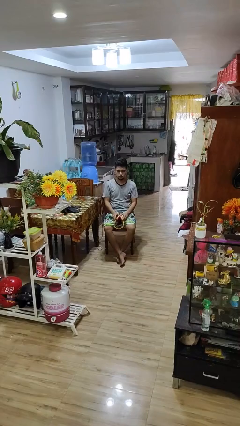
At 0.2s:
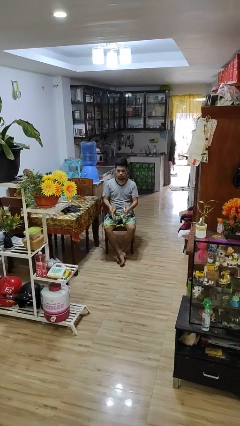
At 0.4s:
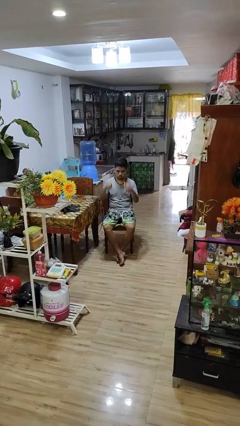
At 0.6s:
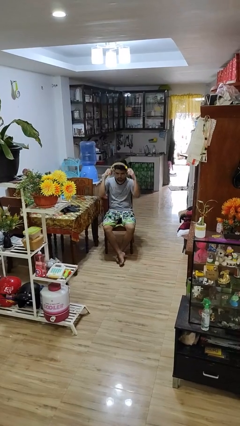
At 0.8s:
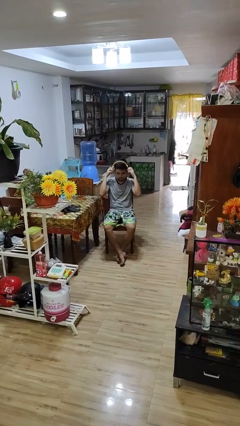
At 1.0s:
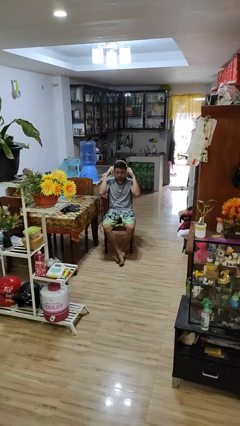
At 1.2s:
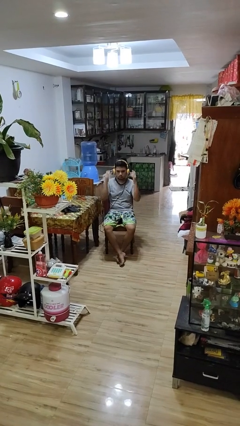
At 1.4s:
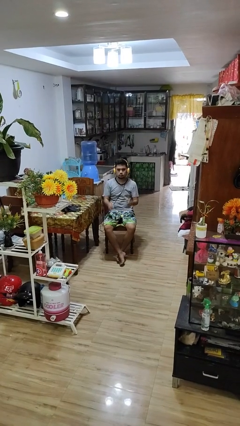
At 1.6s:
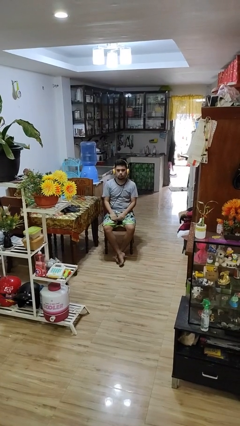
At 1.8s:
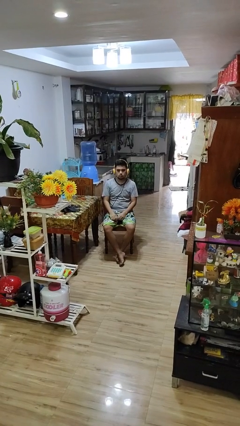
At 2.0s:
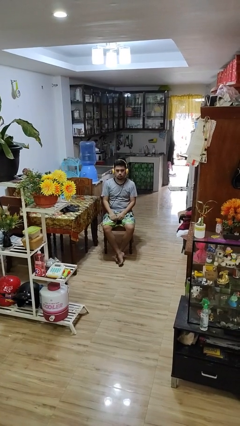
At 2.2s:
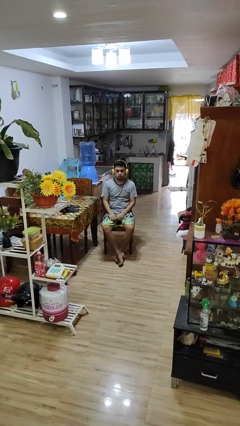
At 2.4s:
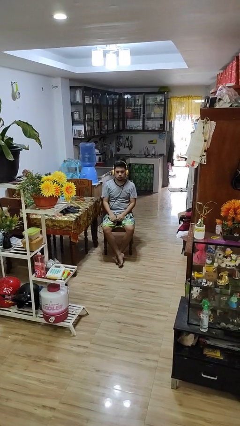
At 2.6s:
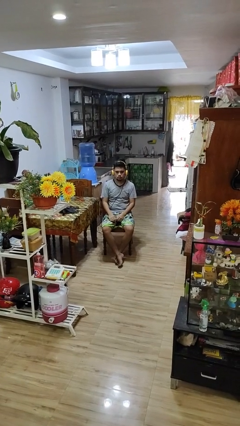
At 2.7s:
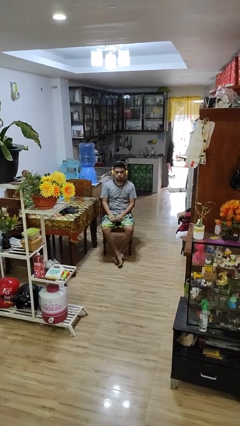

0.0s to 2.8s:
person puts on headphones

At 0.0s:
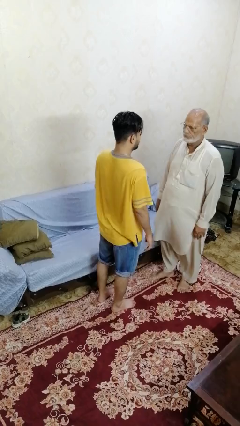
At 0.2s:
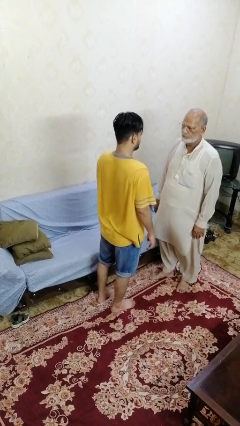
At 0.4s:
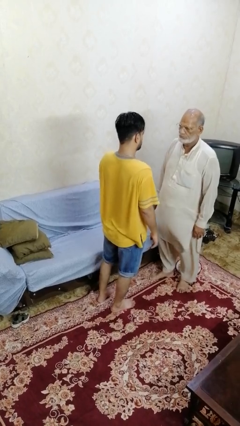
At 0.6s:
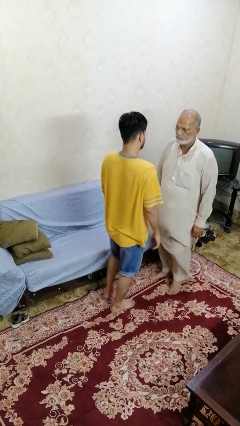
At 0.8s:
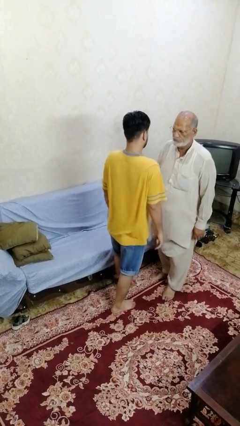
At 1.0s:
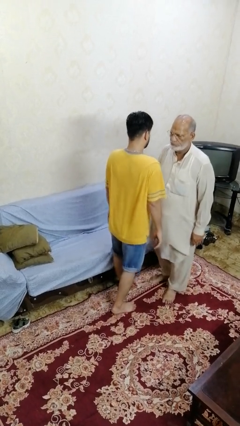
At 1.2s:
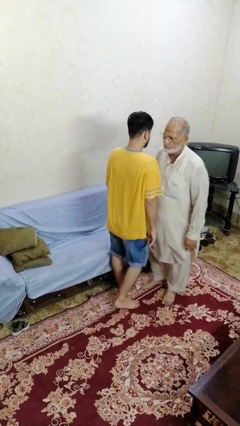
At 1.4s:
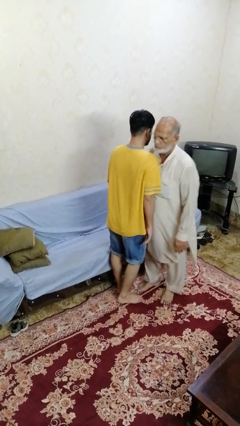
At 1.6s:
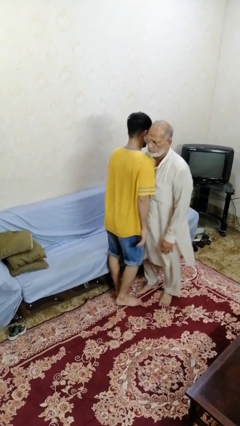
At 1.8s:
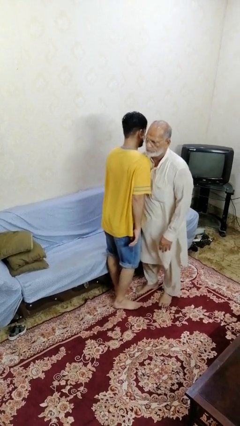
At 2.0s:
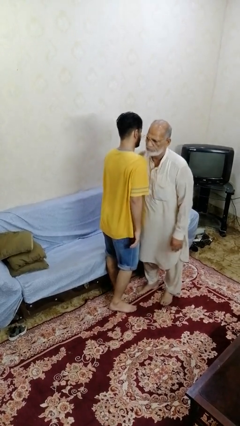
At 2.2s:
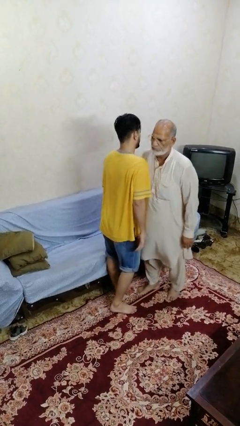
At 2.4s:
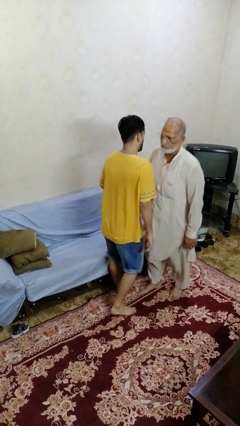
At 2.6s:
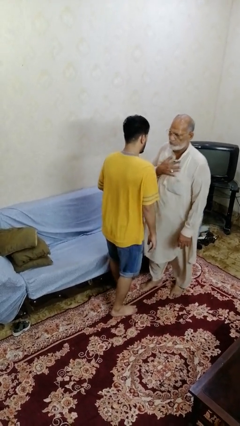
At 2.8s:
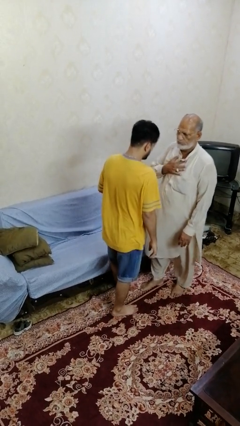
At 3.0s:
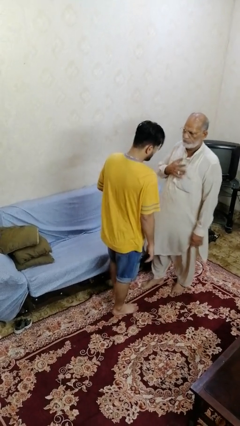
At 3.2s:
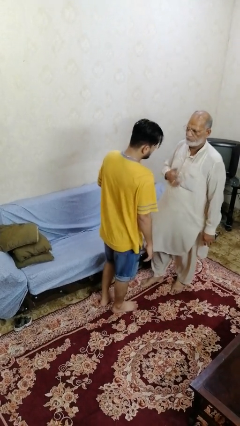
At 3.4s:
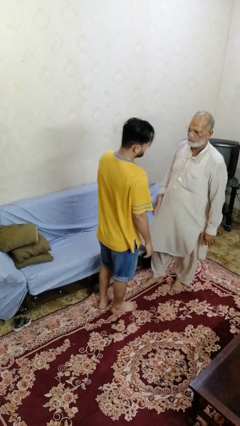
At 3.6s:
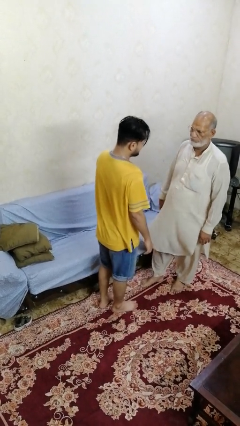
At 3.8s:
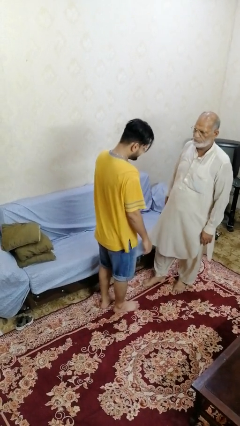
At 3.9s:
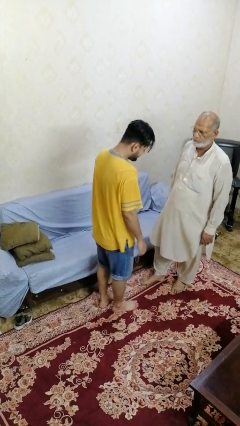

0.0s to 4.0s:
person bumps into person

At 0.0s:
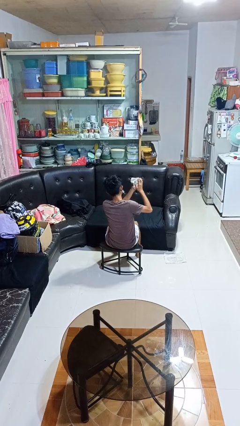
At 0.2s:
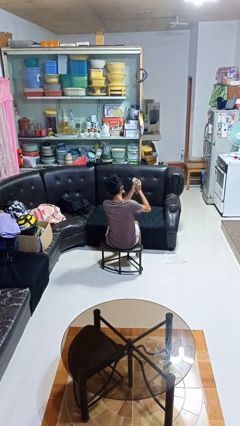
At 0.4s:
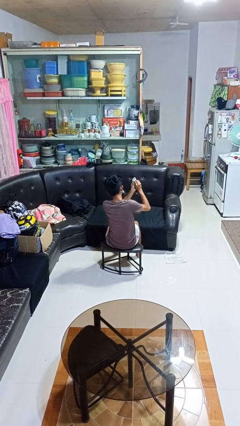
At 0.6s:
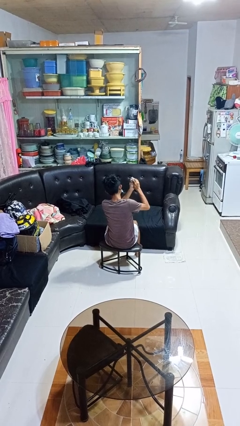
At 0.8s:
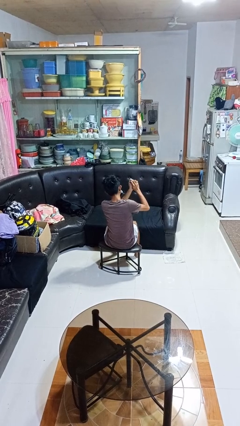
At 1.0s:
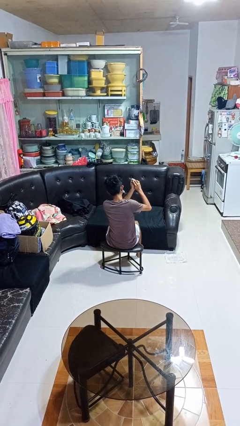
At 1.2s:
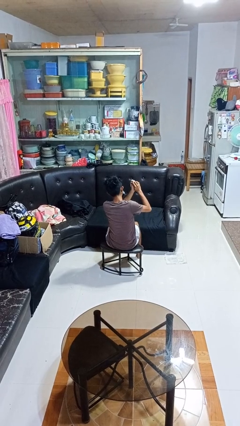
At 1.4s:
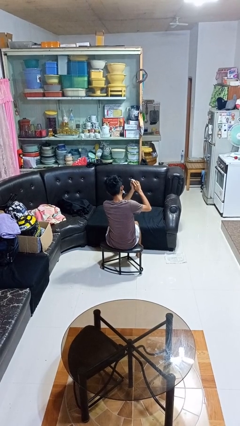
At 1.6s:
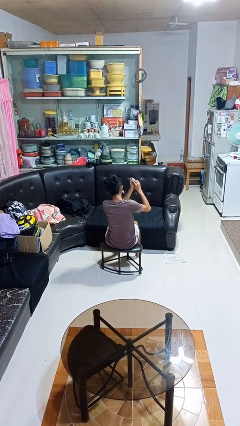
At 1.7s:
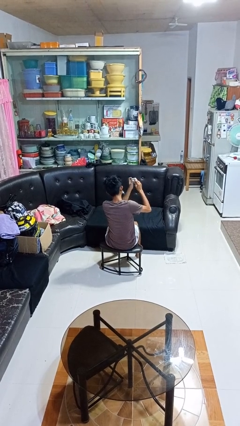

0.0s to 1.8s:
person crumples paper

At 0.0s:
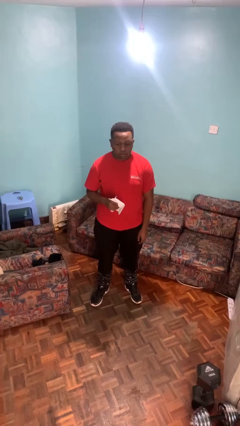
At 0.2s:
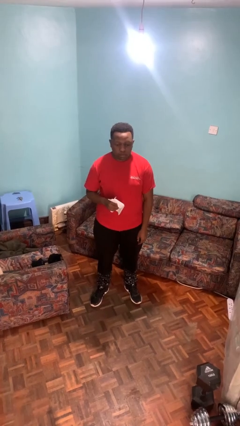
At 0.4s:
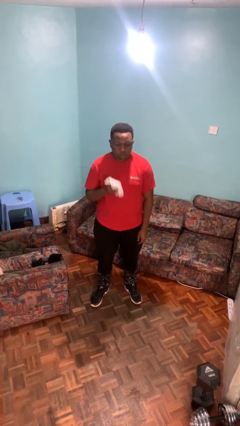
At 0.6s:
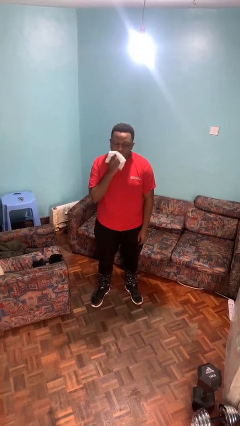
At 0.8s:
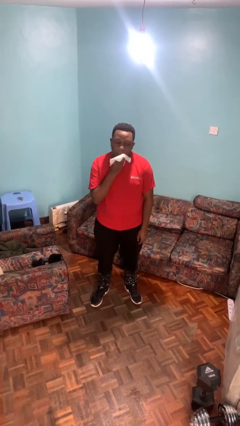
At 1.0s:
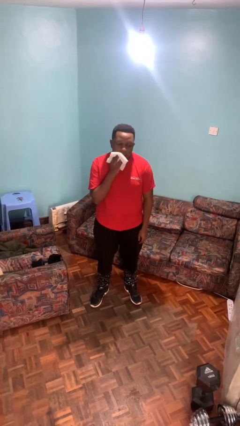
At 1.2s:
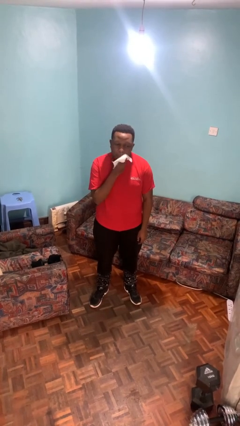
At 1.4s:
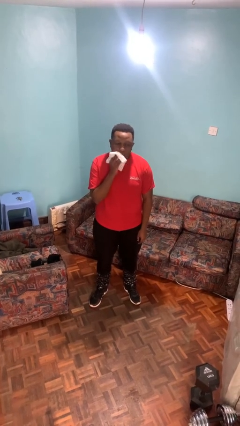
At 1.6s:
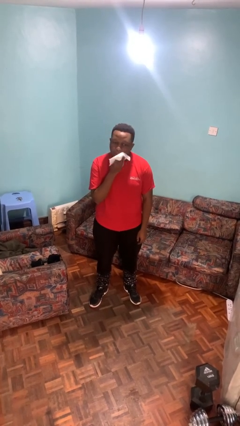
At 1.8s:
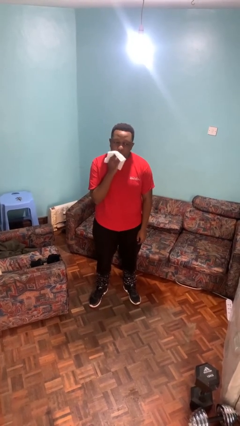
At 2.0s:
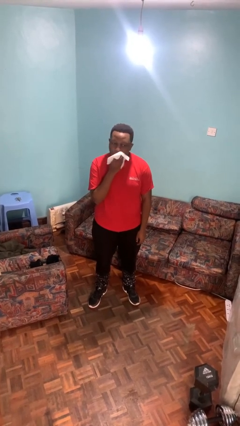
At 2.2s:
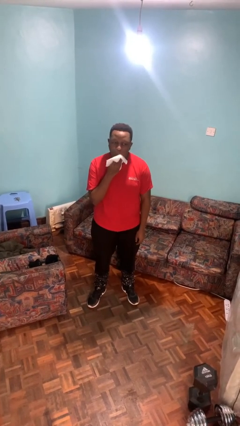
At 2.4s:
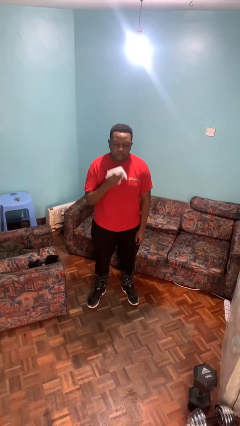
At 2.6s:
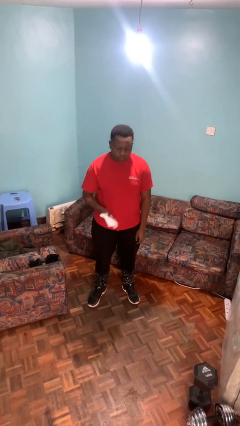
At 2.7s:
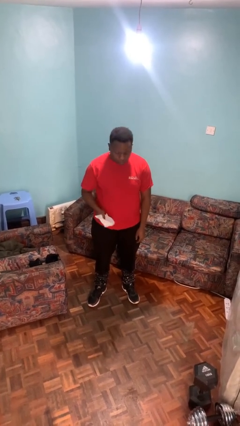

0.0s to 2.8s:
person wipes mouth with napkin

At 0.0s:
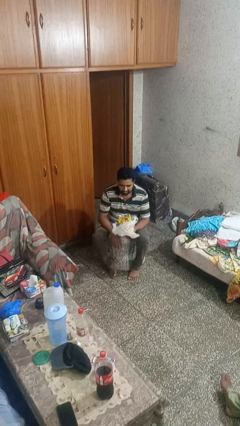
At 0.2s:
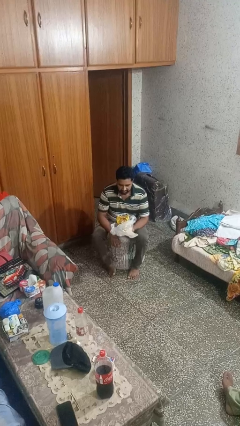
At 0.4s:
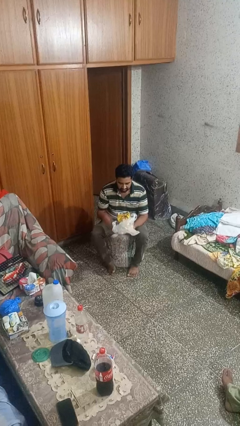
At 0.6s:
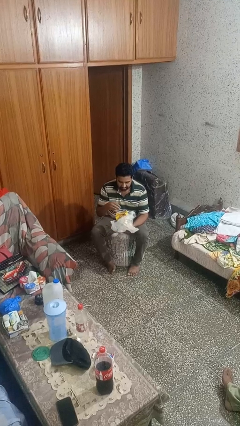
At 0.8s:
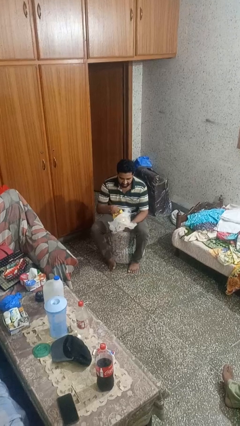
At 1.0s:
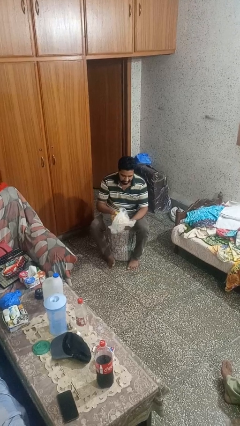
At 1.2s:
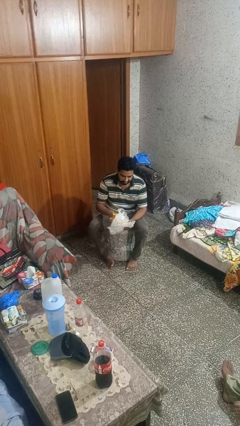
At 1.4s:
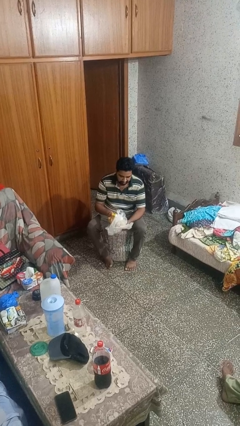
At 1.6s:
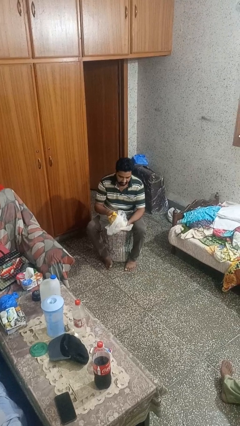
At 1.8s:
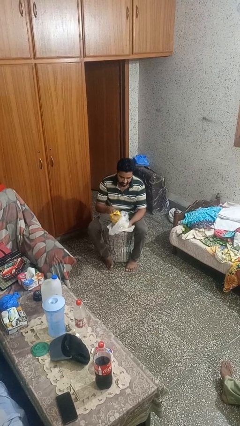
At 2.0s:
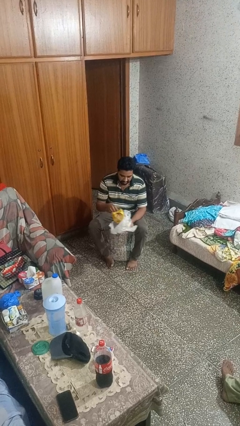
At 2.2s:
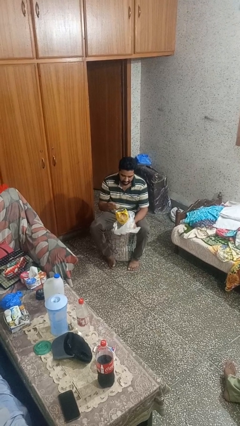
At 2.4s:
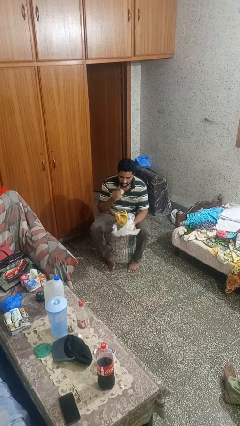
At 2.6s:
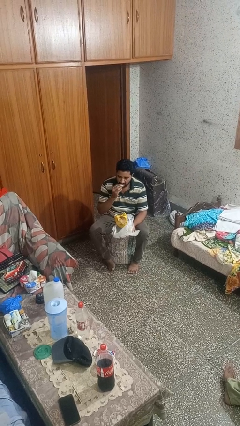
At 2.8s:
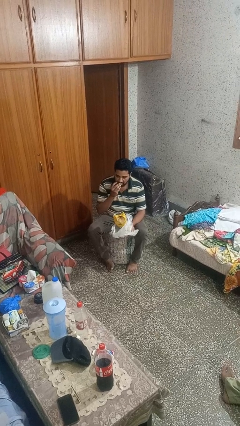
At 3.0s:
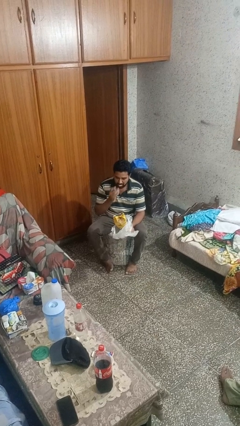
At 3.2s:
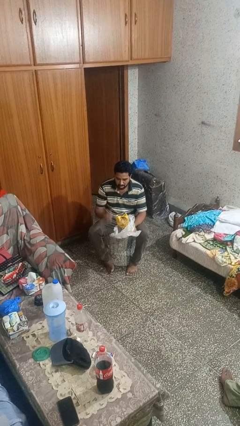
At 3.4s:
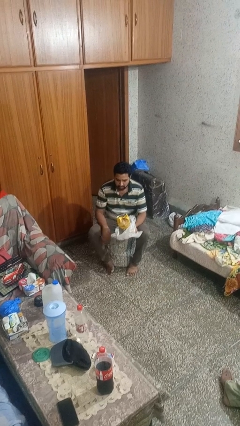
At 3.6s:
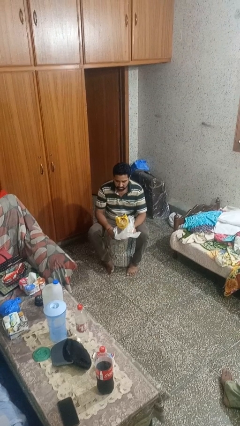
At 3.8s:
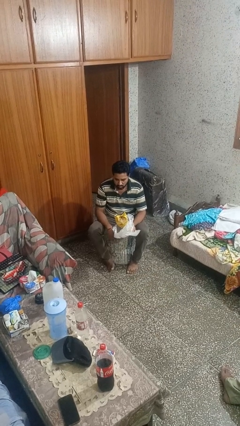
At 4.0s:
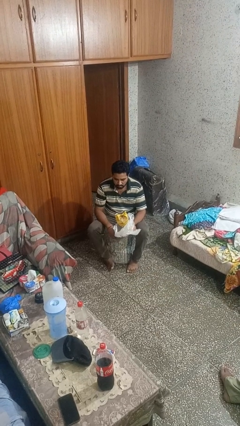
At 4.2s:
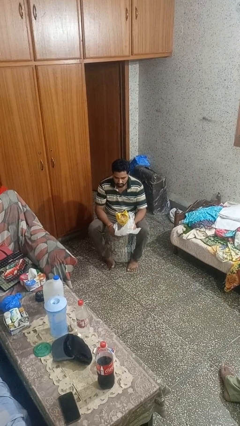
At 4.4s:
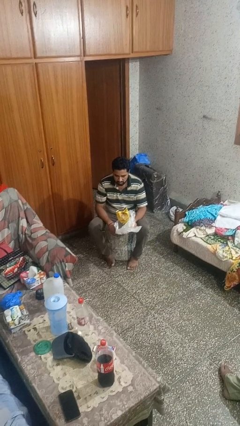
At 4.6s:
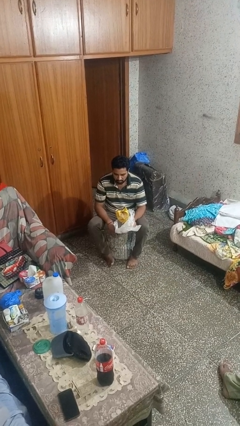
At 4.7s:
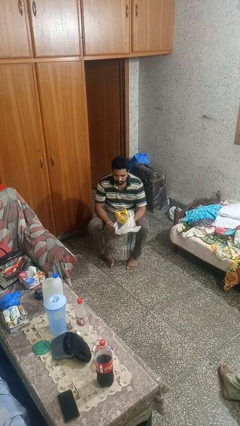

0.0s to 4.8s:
person eats snack from bag

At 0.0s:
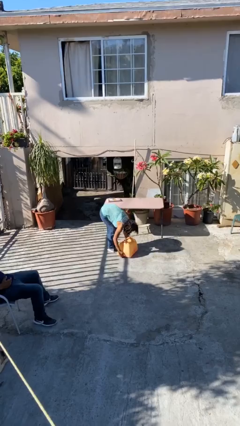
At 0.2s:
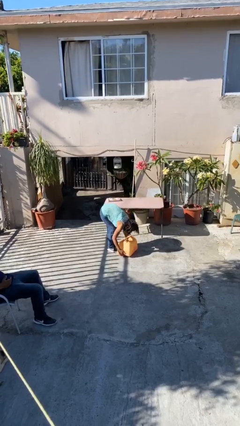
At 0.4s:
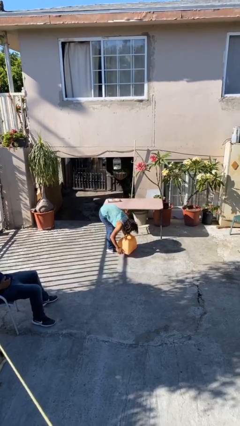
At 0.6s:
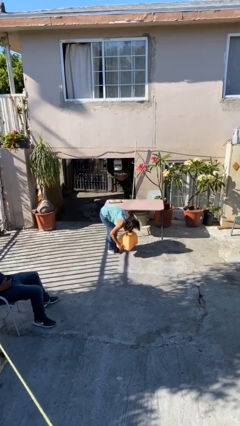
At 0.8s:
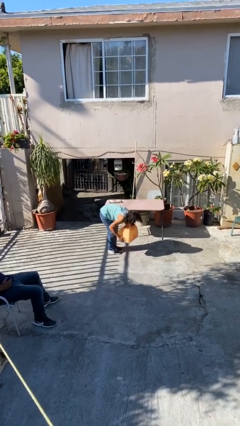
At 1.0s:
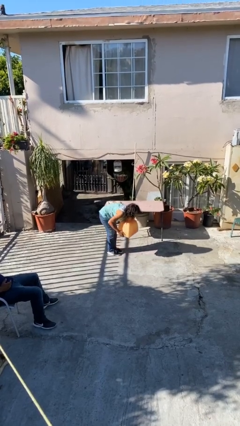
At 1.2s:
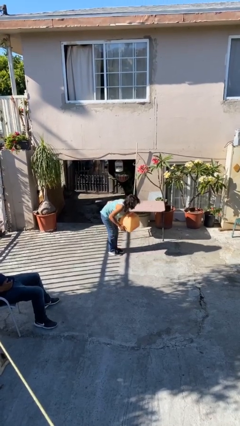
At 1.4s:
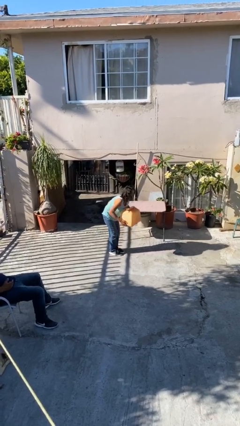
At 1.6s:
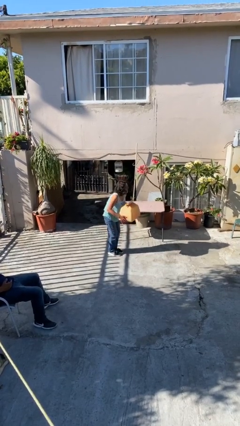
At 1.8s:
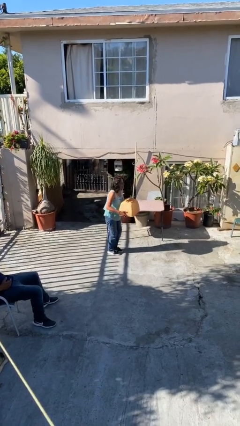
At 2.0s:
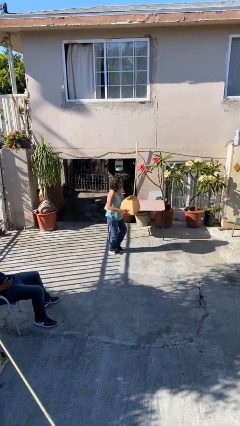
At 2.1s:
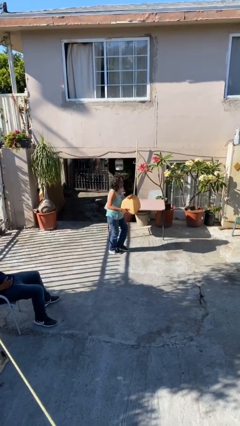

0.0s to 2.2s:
person picks up object from floor
